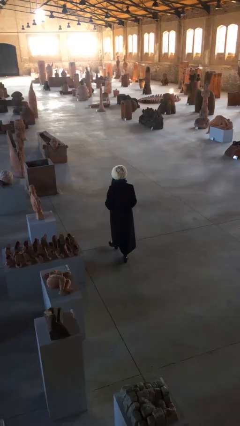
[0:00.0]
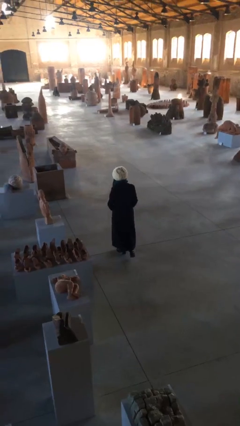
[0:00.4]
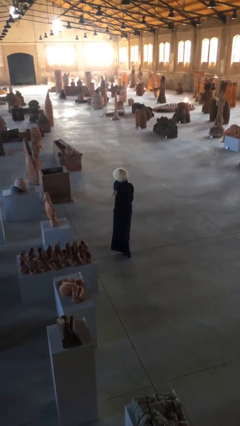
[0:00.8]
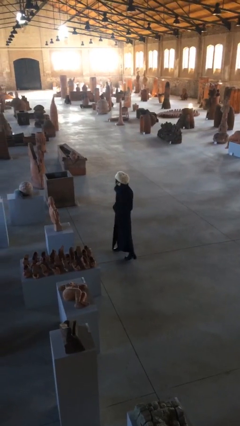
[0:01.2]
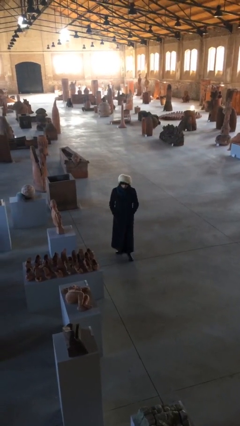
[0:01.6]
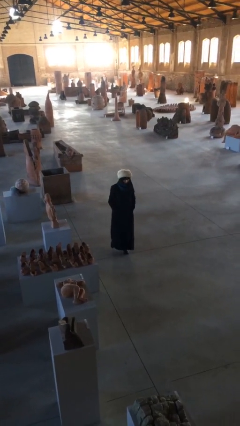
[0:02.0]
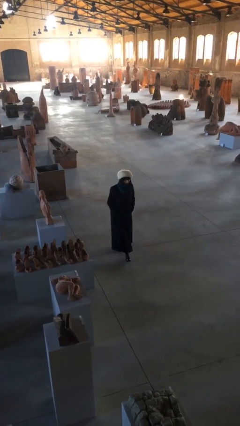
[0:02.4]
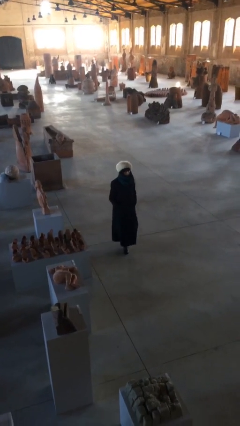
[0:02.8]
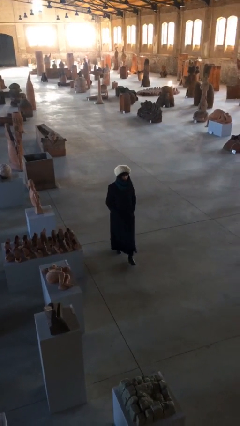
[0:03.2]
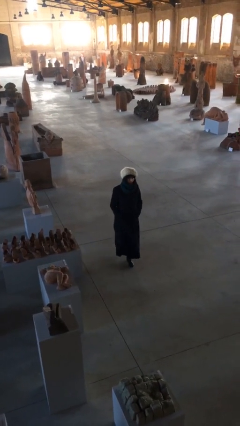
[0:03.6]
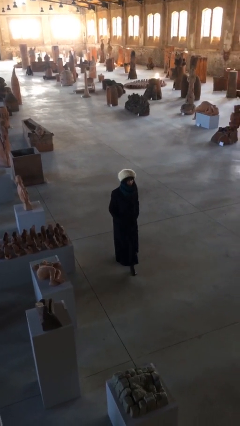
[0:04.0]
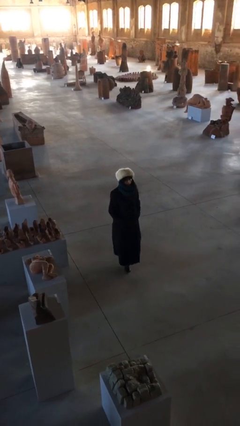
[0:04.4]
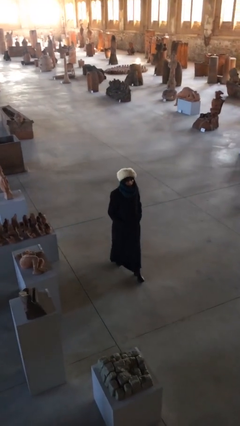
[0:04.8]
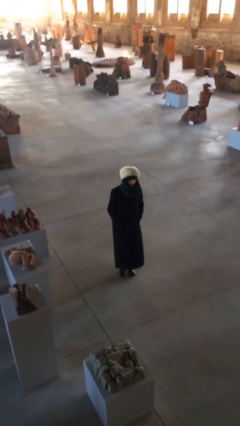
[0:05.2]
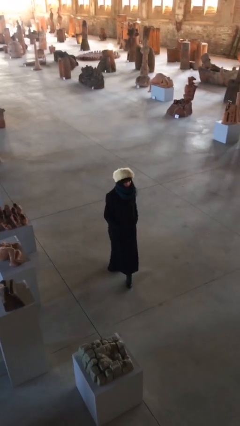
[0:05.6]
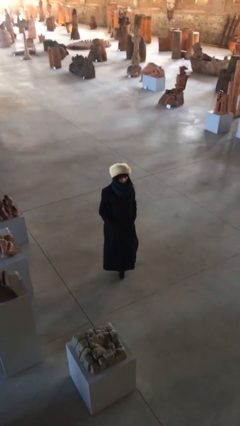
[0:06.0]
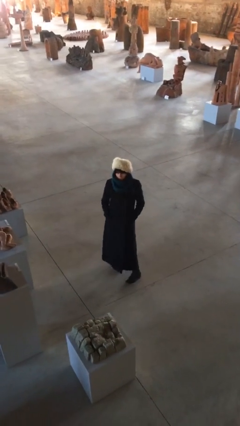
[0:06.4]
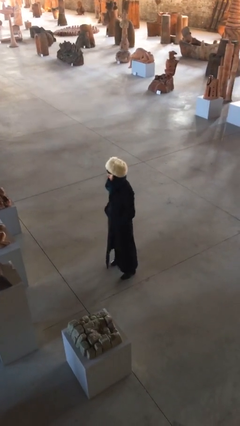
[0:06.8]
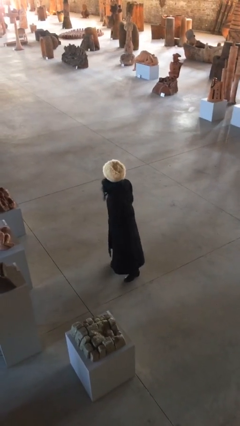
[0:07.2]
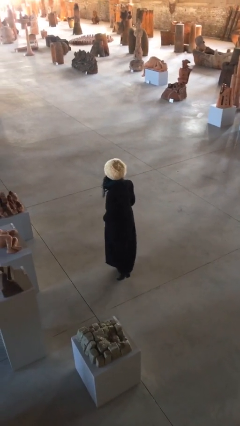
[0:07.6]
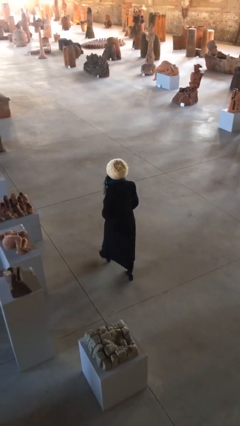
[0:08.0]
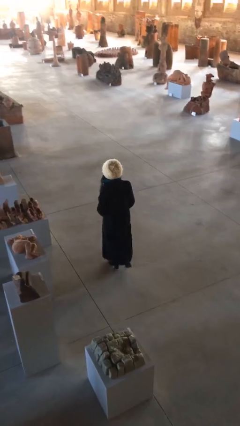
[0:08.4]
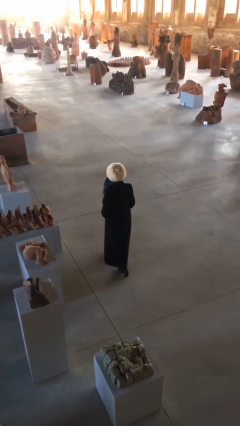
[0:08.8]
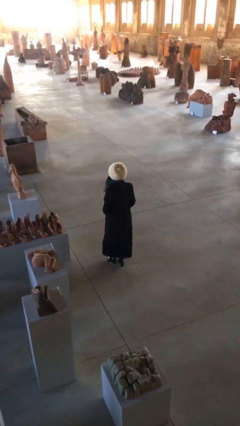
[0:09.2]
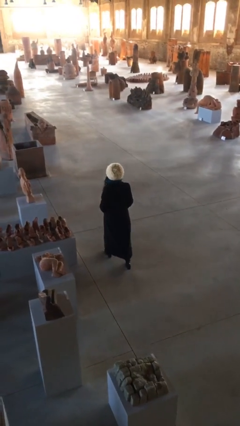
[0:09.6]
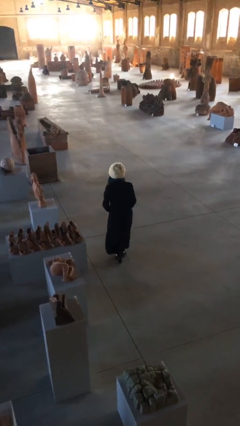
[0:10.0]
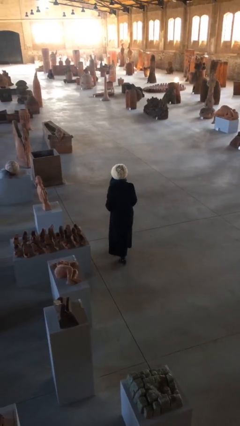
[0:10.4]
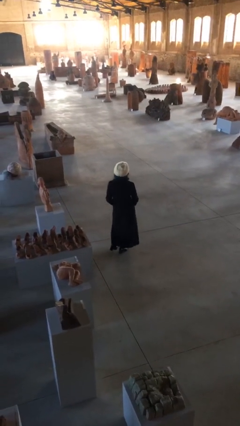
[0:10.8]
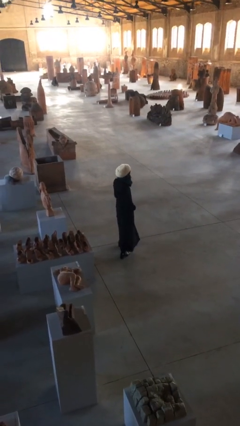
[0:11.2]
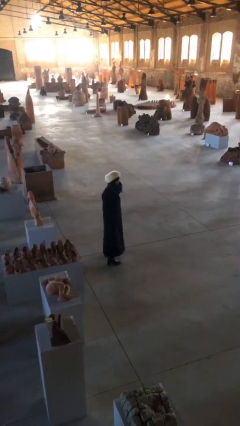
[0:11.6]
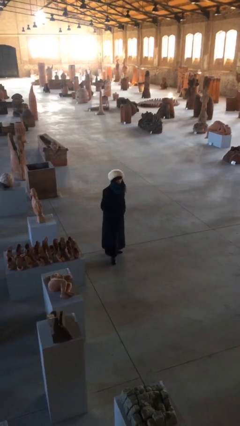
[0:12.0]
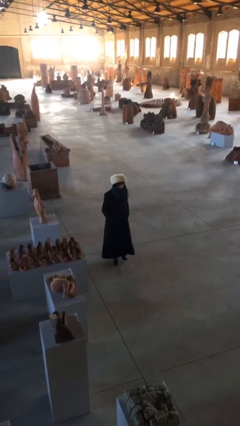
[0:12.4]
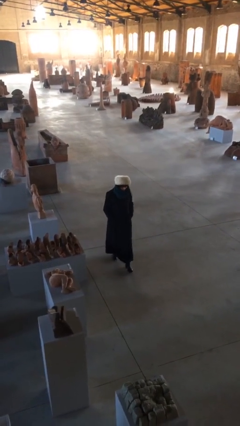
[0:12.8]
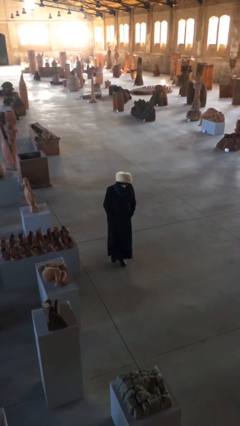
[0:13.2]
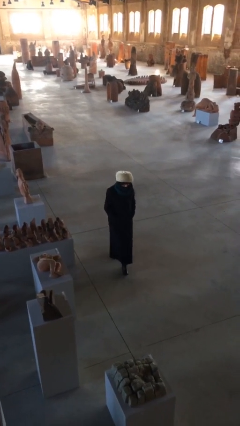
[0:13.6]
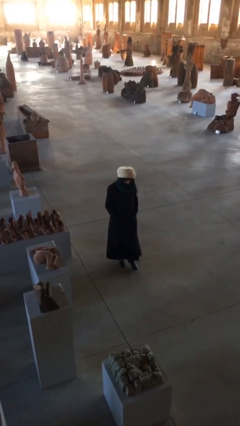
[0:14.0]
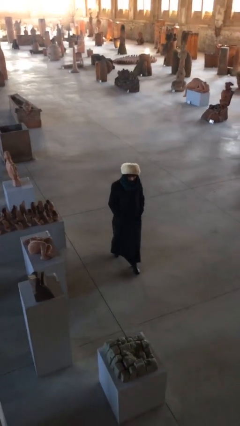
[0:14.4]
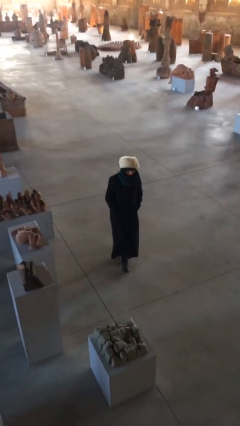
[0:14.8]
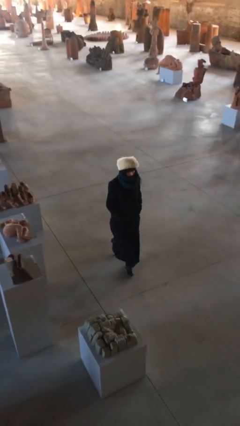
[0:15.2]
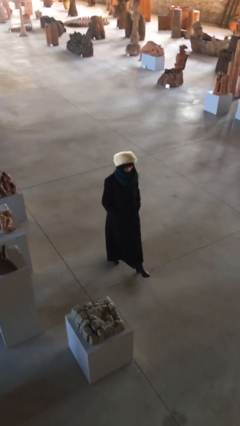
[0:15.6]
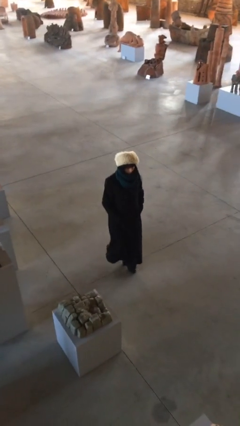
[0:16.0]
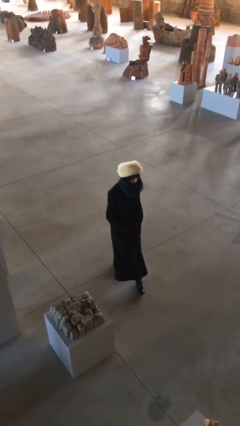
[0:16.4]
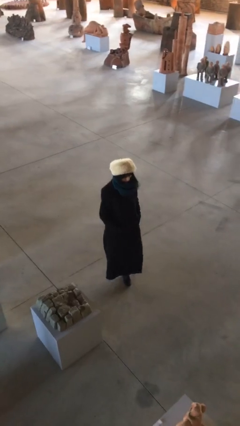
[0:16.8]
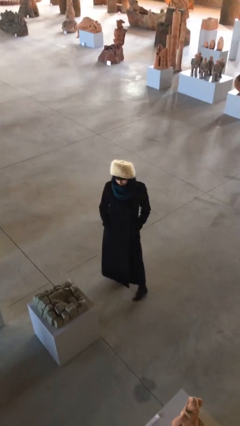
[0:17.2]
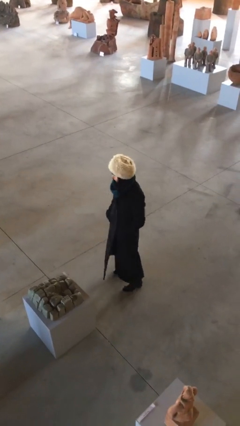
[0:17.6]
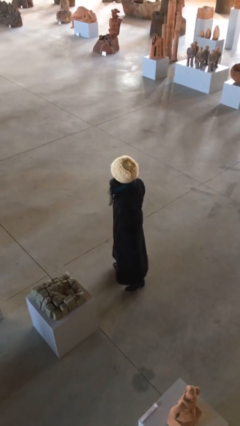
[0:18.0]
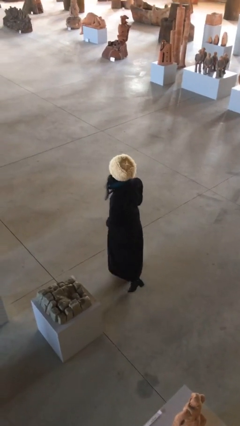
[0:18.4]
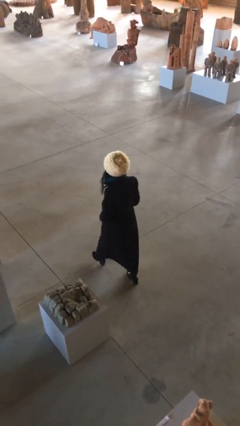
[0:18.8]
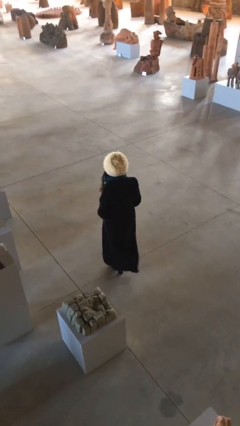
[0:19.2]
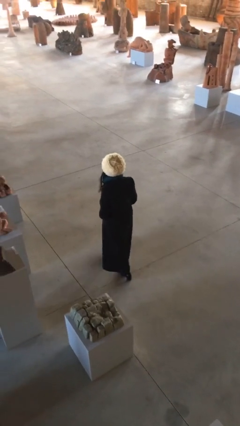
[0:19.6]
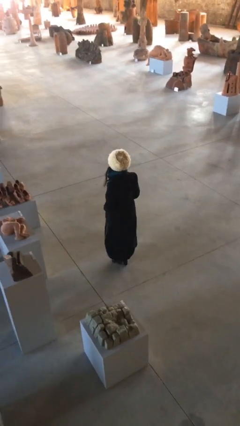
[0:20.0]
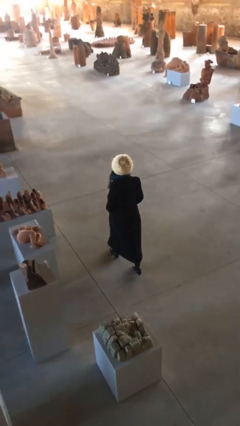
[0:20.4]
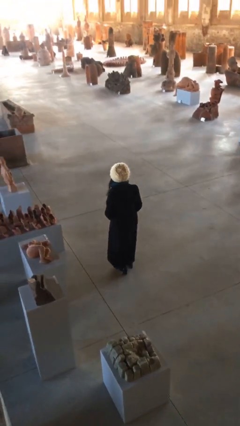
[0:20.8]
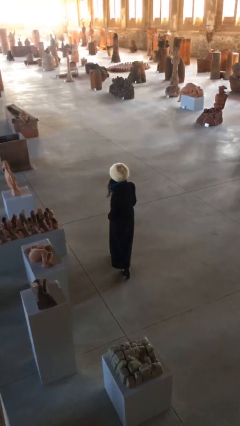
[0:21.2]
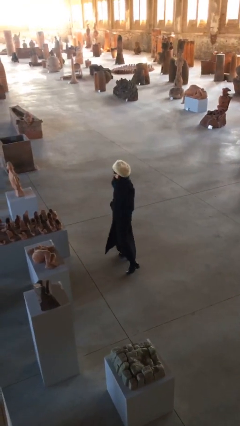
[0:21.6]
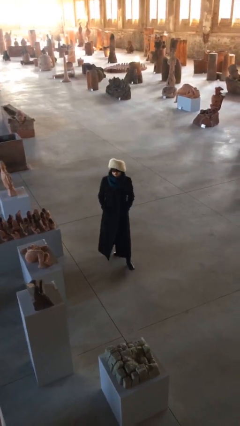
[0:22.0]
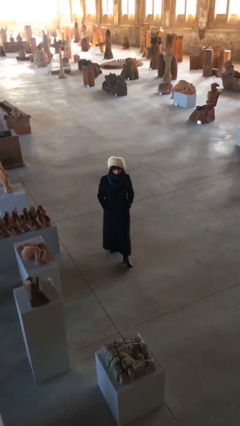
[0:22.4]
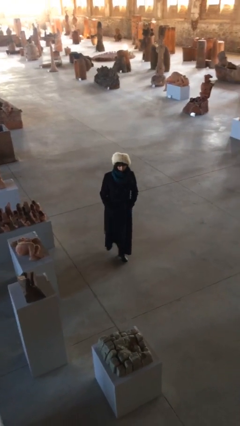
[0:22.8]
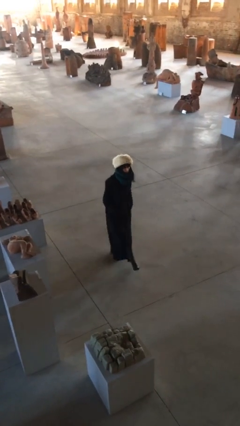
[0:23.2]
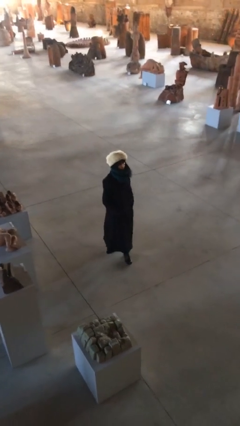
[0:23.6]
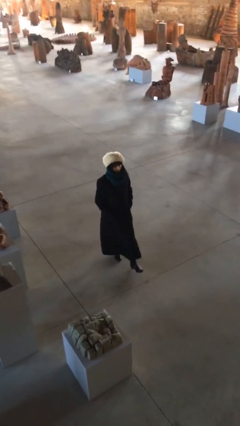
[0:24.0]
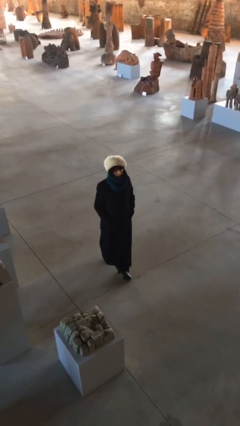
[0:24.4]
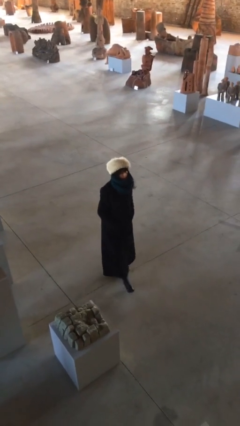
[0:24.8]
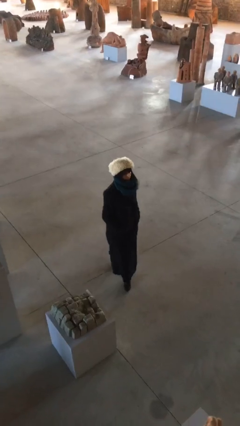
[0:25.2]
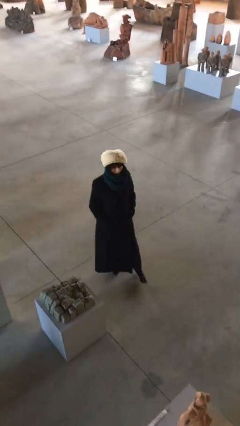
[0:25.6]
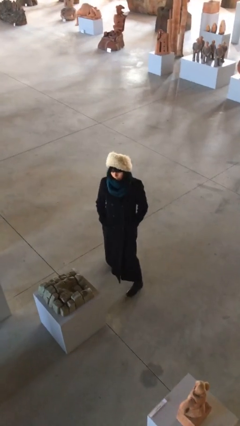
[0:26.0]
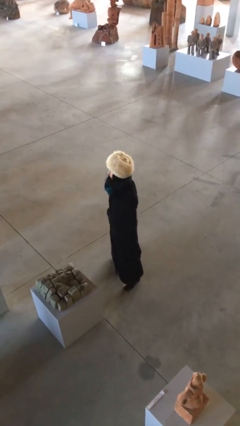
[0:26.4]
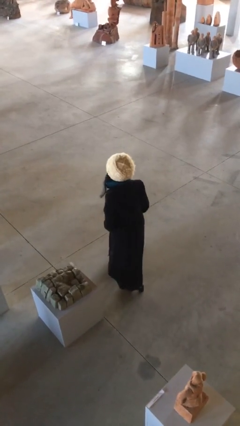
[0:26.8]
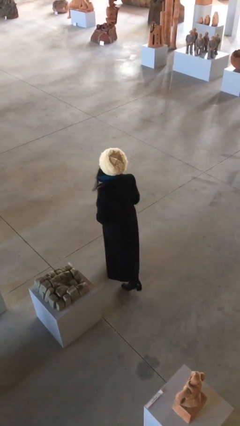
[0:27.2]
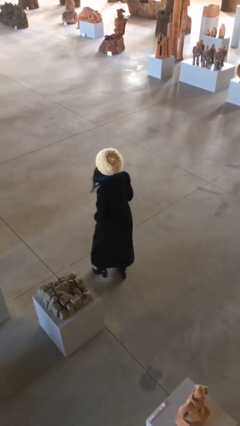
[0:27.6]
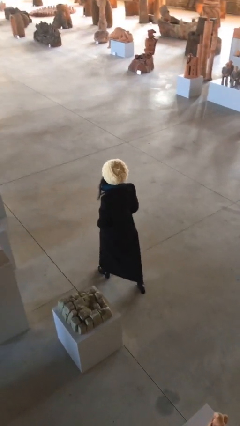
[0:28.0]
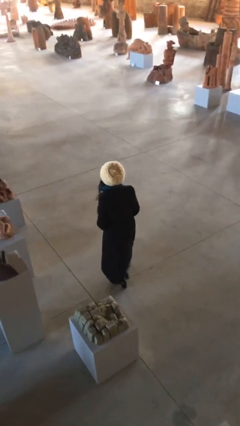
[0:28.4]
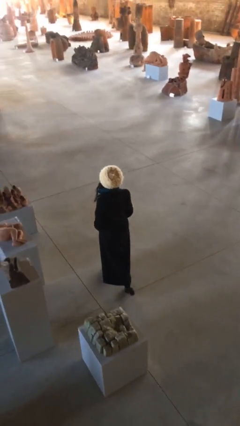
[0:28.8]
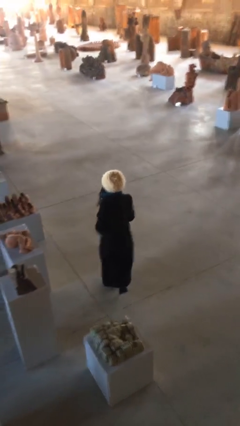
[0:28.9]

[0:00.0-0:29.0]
person walks

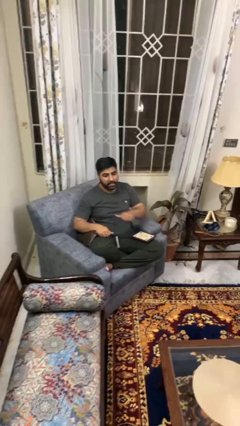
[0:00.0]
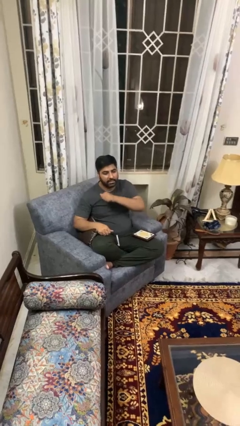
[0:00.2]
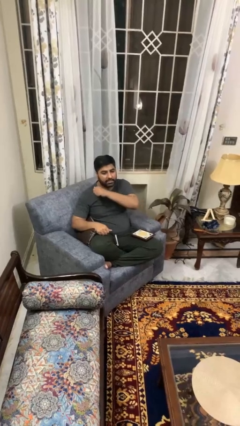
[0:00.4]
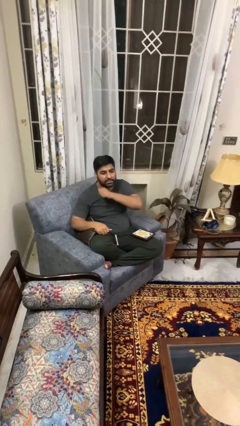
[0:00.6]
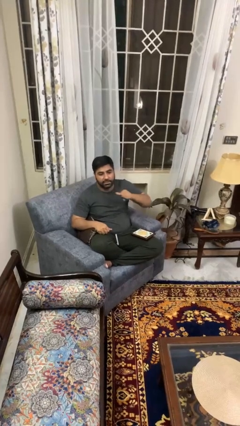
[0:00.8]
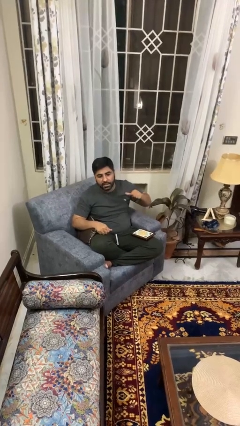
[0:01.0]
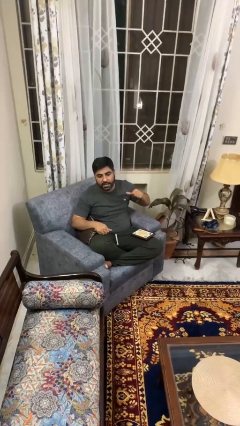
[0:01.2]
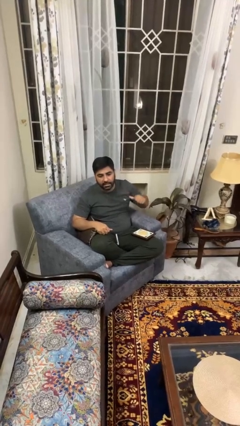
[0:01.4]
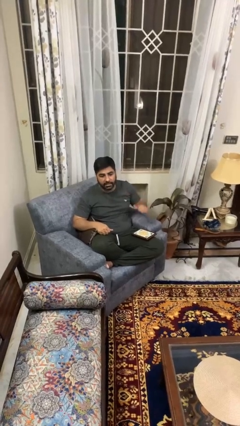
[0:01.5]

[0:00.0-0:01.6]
person gestures cut

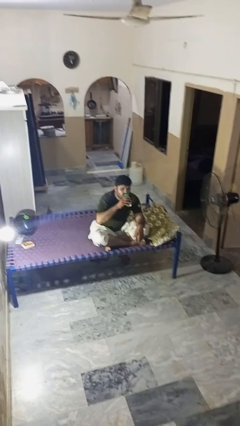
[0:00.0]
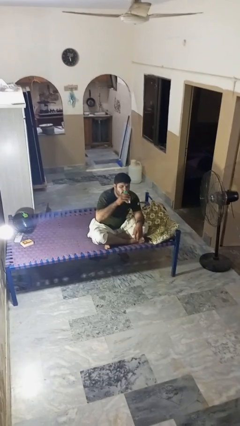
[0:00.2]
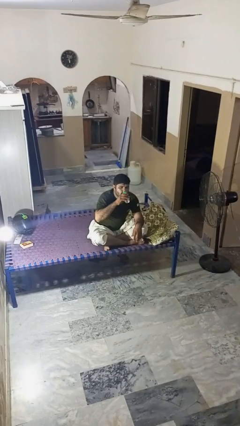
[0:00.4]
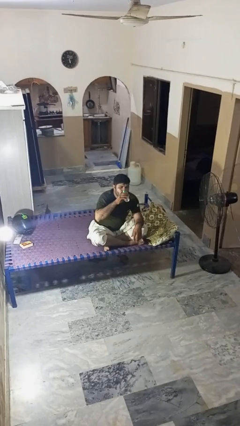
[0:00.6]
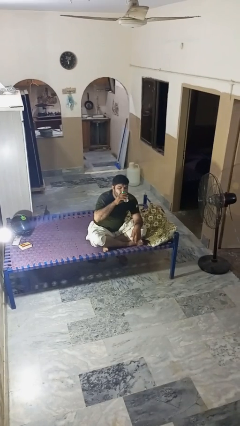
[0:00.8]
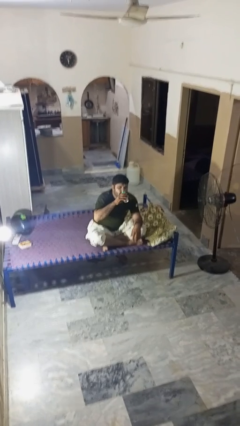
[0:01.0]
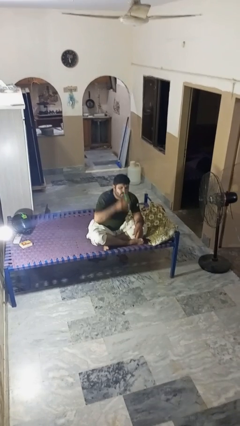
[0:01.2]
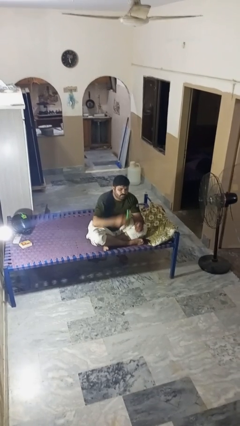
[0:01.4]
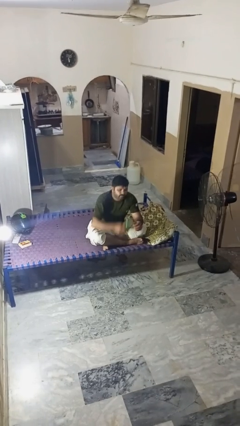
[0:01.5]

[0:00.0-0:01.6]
person drinks from beverage can
